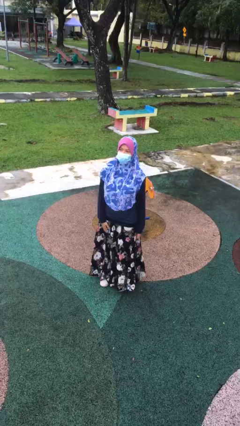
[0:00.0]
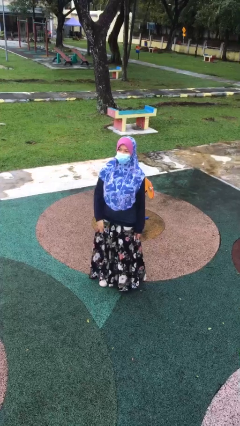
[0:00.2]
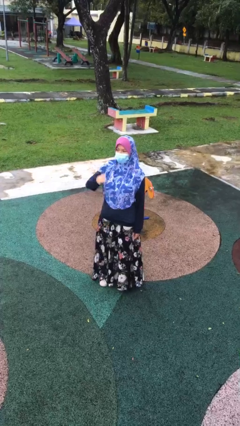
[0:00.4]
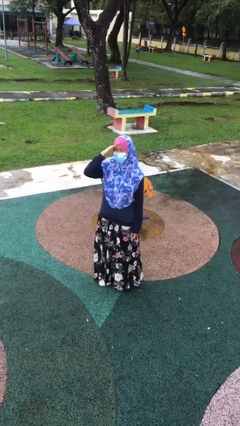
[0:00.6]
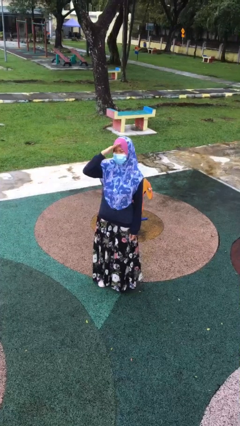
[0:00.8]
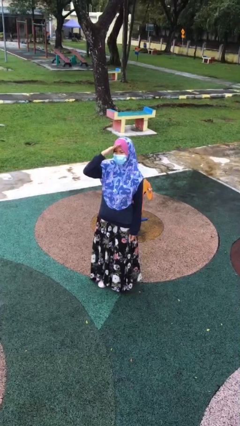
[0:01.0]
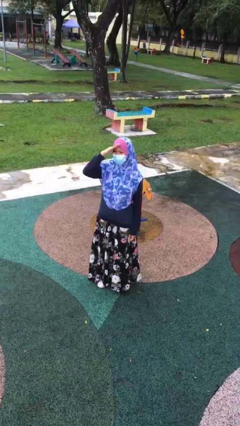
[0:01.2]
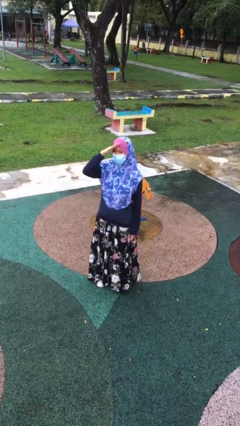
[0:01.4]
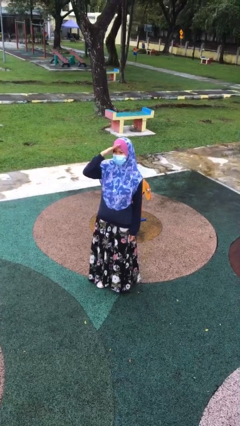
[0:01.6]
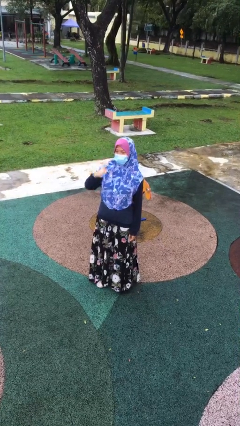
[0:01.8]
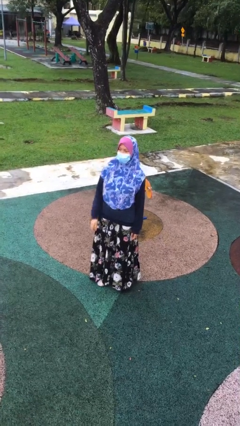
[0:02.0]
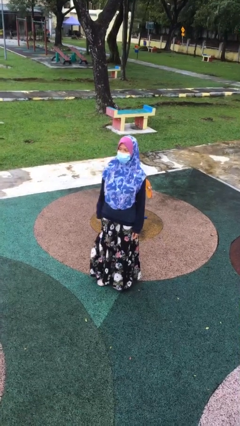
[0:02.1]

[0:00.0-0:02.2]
person salutes

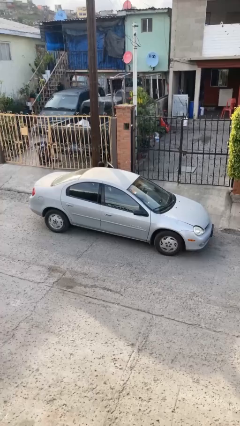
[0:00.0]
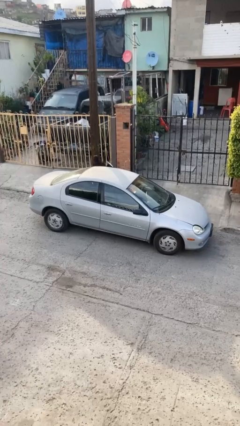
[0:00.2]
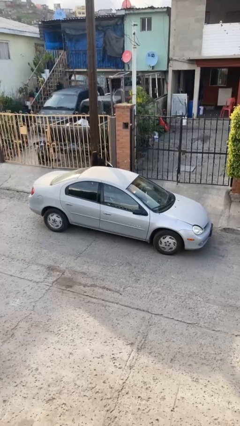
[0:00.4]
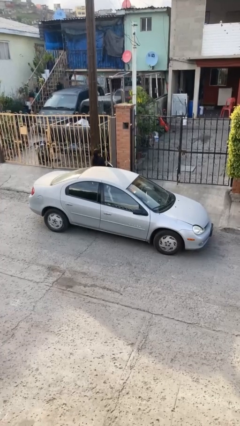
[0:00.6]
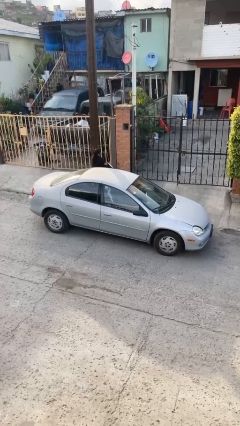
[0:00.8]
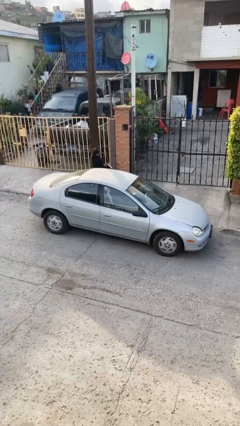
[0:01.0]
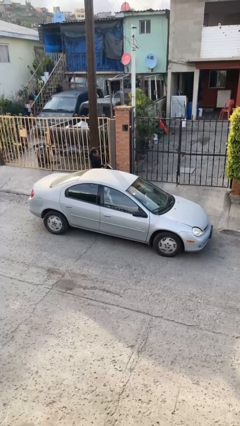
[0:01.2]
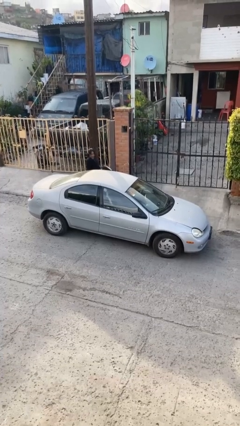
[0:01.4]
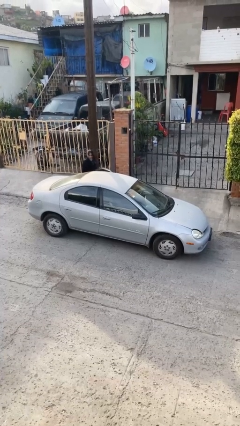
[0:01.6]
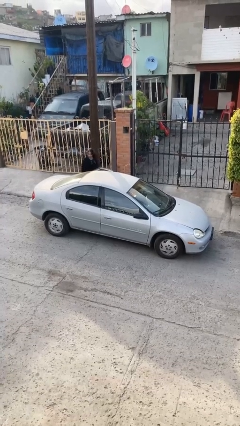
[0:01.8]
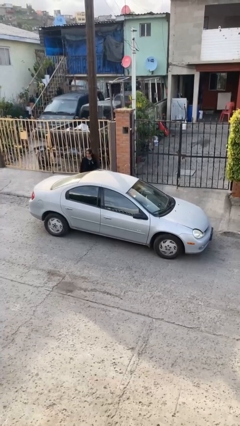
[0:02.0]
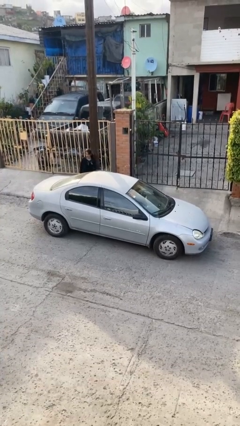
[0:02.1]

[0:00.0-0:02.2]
car drops off person

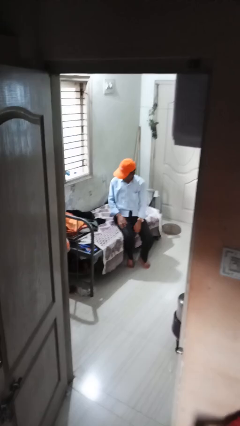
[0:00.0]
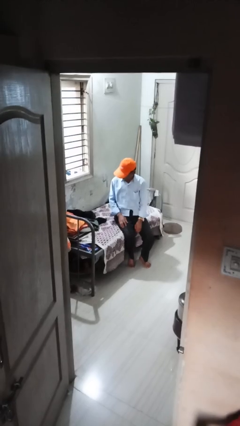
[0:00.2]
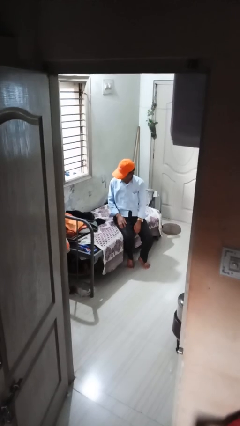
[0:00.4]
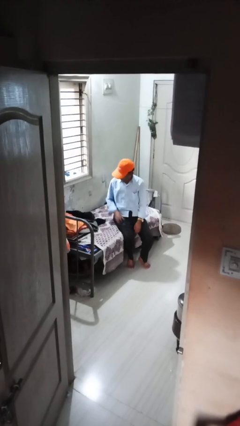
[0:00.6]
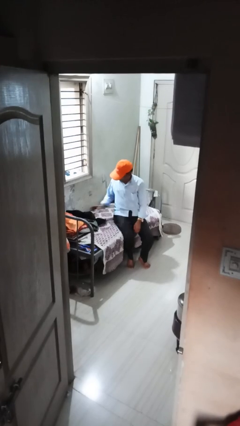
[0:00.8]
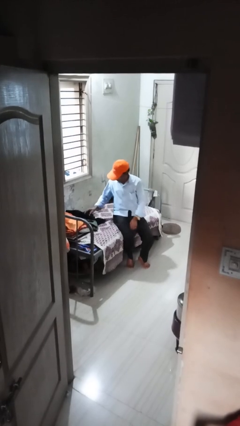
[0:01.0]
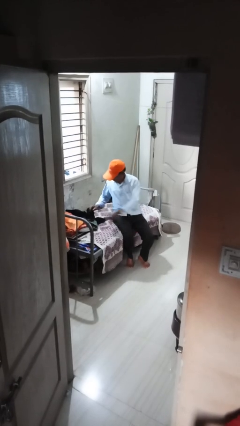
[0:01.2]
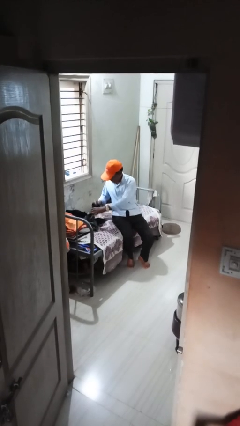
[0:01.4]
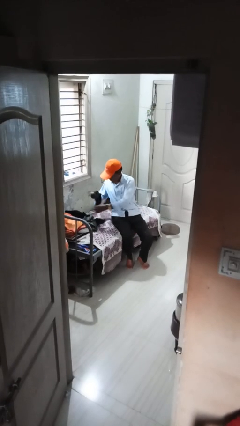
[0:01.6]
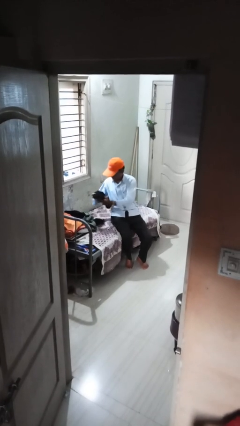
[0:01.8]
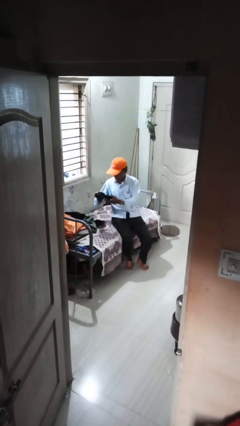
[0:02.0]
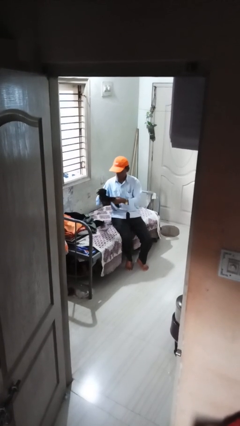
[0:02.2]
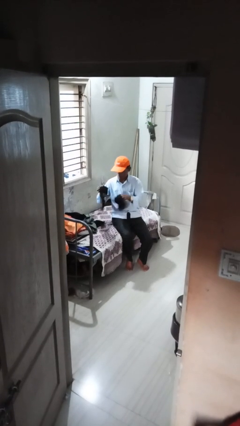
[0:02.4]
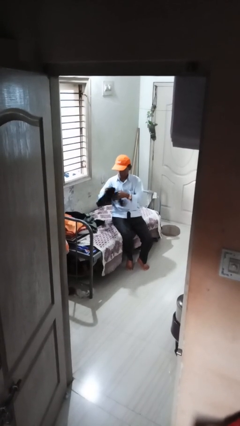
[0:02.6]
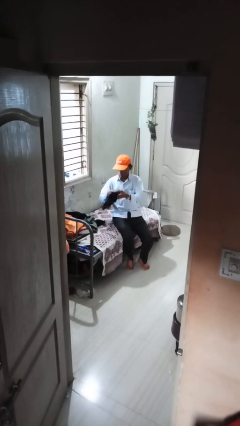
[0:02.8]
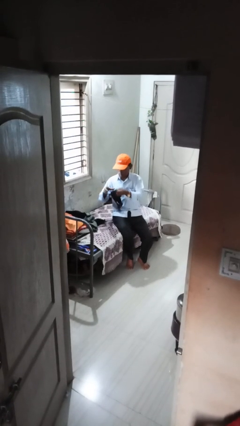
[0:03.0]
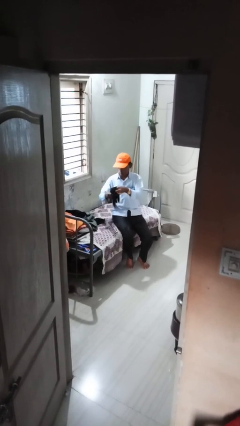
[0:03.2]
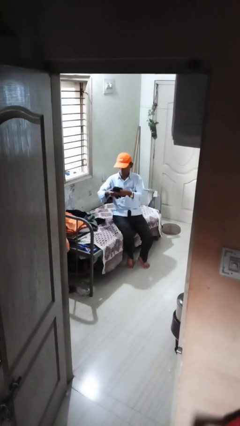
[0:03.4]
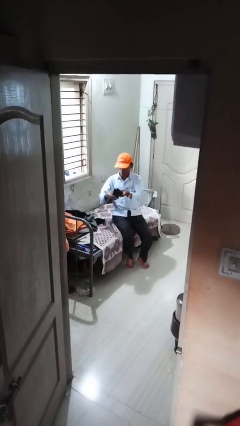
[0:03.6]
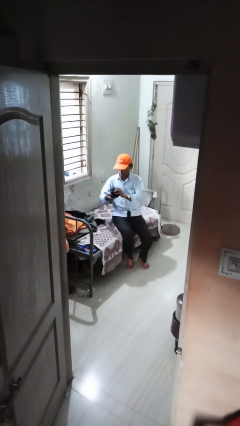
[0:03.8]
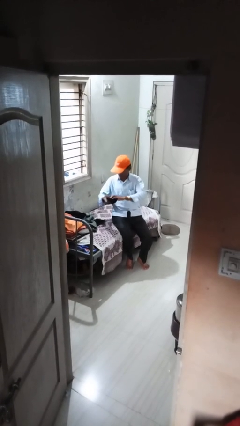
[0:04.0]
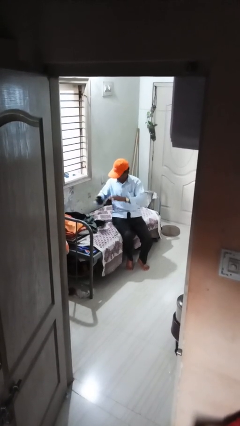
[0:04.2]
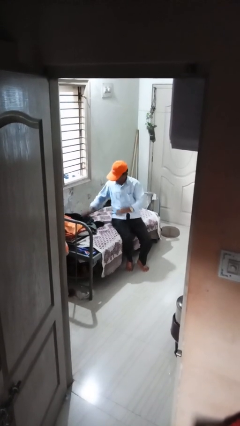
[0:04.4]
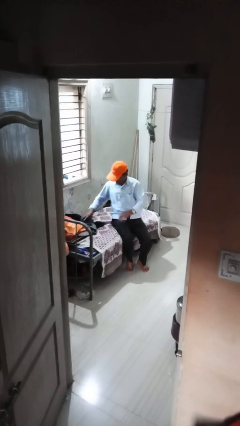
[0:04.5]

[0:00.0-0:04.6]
person folds socks

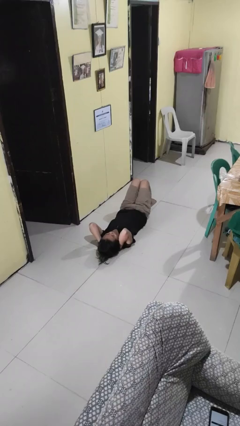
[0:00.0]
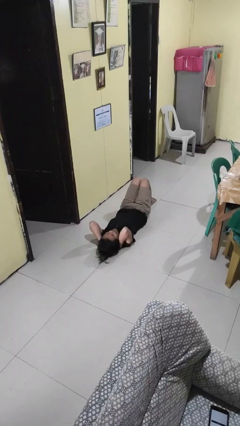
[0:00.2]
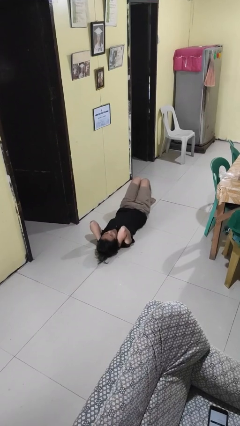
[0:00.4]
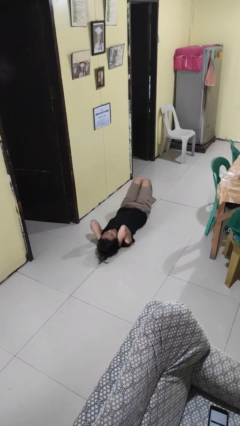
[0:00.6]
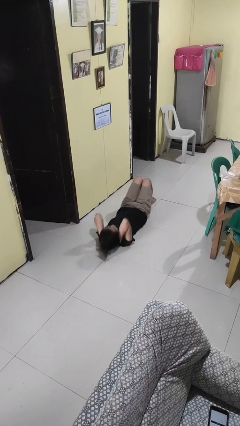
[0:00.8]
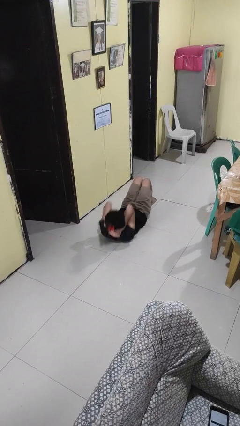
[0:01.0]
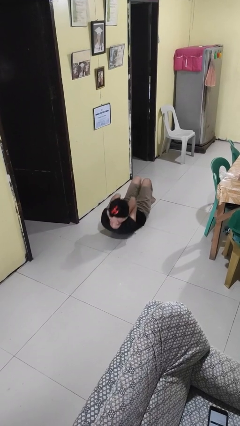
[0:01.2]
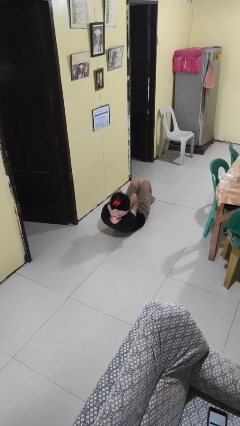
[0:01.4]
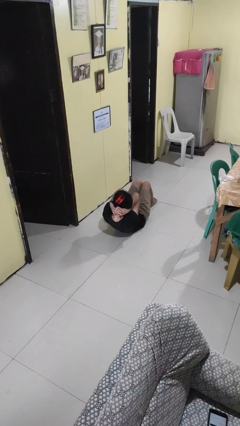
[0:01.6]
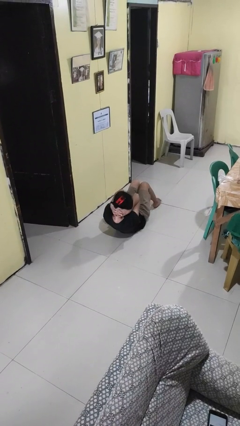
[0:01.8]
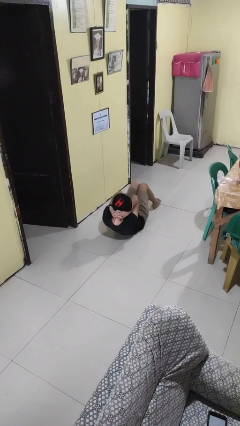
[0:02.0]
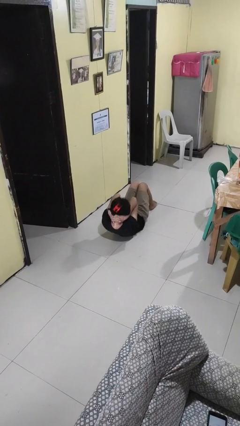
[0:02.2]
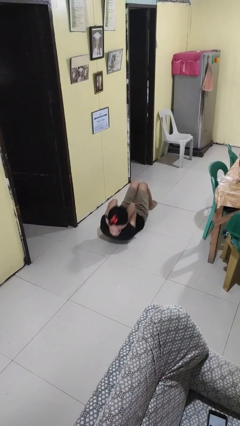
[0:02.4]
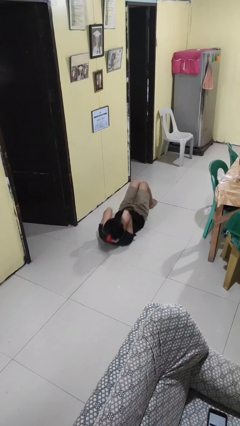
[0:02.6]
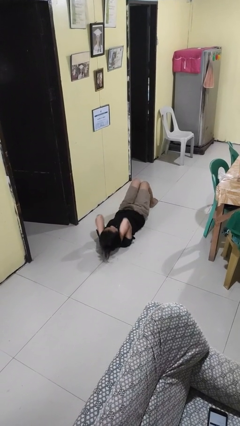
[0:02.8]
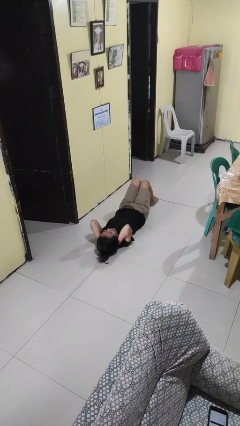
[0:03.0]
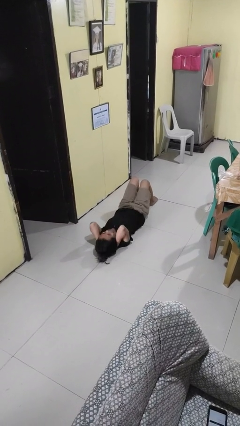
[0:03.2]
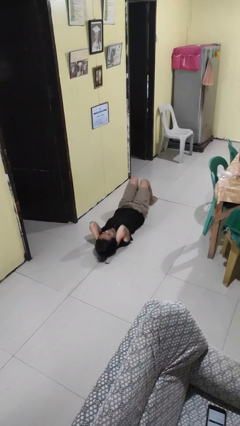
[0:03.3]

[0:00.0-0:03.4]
person exercises with situp

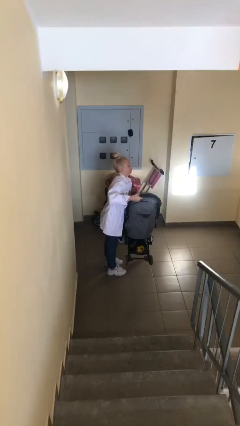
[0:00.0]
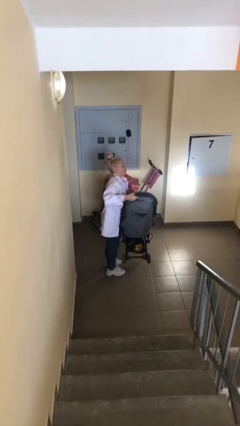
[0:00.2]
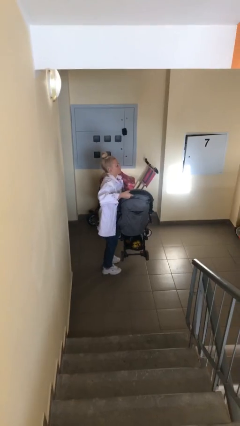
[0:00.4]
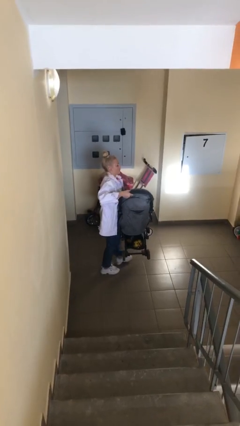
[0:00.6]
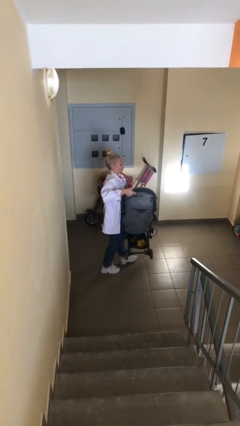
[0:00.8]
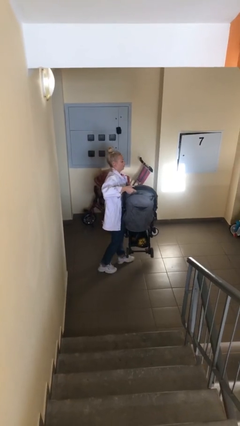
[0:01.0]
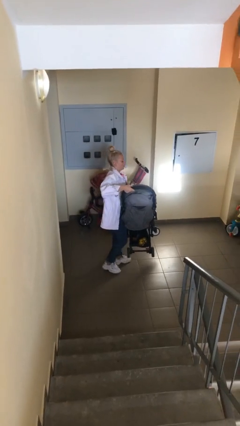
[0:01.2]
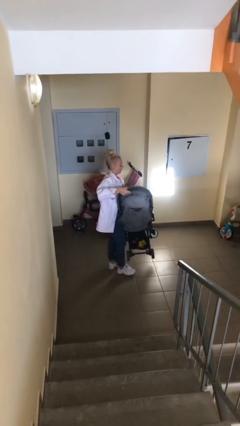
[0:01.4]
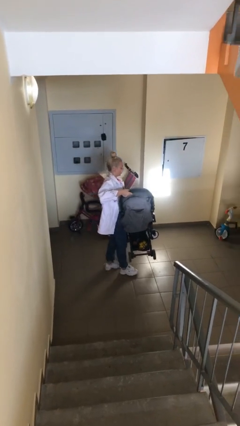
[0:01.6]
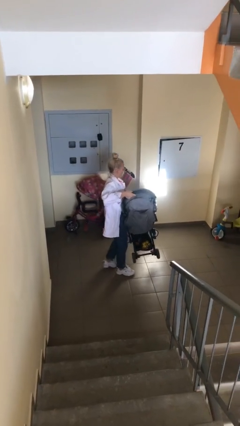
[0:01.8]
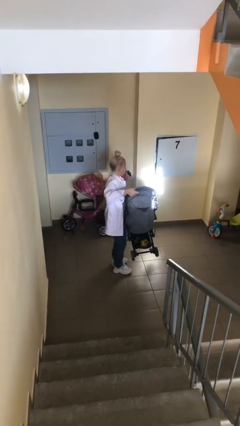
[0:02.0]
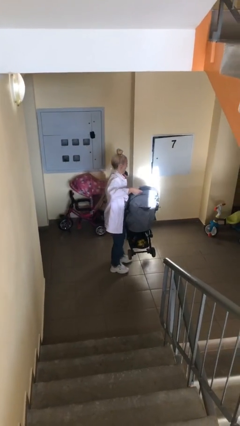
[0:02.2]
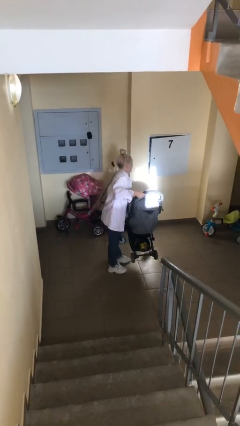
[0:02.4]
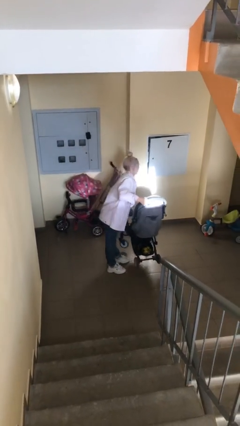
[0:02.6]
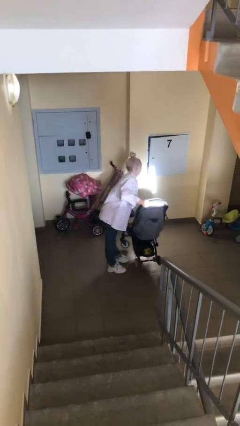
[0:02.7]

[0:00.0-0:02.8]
person carries heavy object

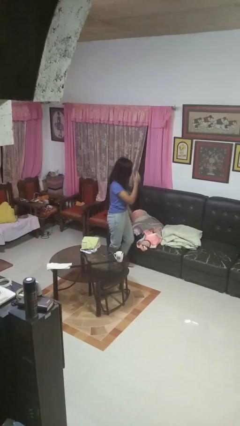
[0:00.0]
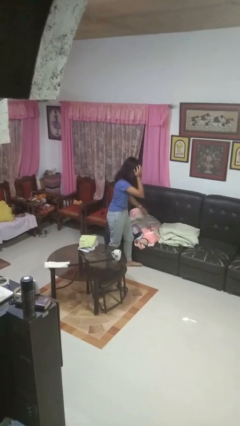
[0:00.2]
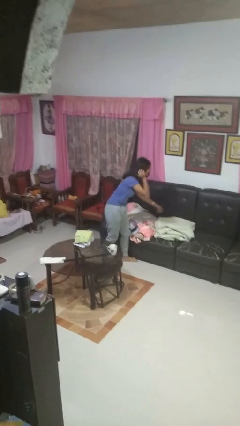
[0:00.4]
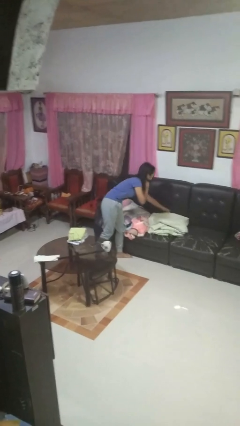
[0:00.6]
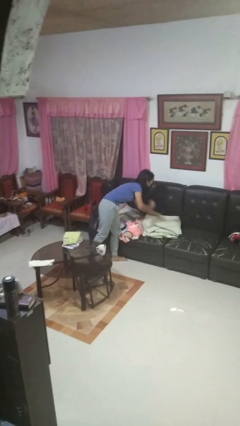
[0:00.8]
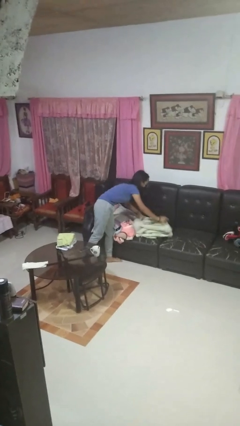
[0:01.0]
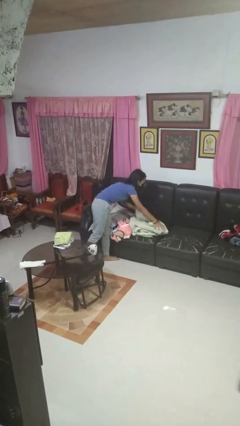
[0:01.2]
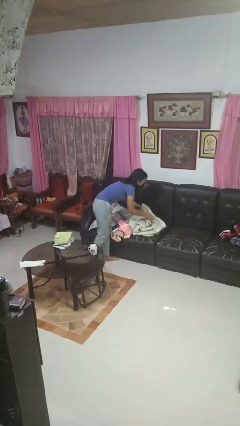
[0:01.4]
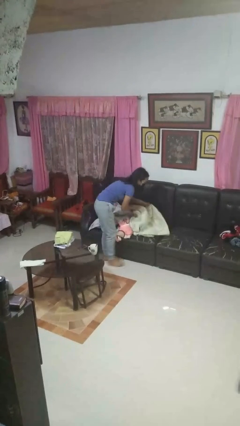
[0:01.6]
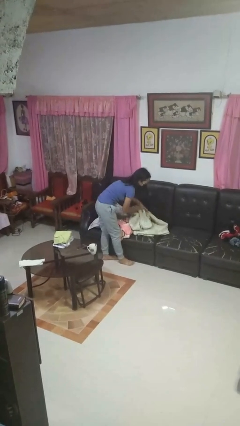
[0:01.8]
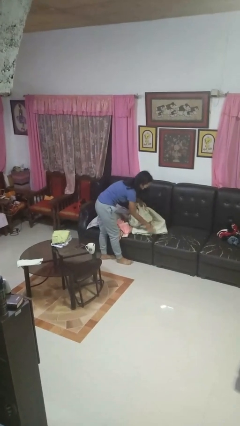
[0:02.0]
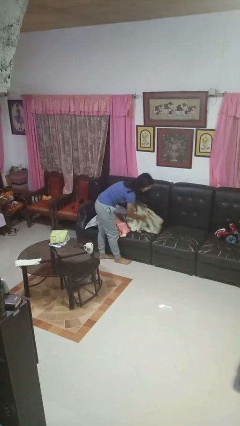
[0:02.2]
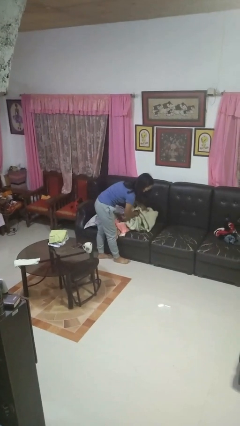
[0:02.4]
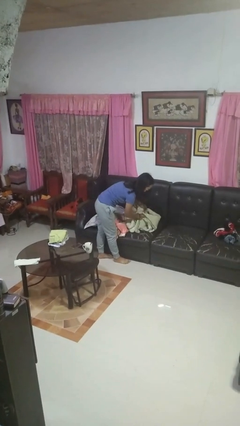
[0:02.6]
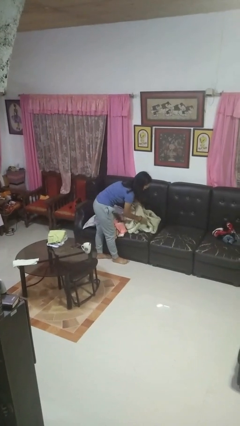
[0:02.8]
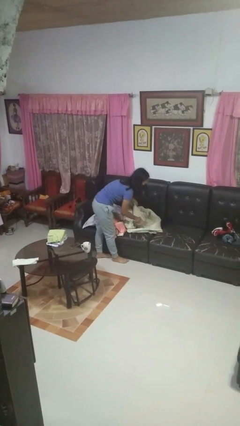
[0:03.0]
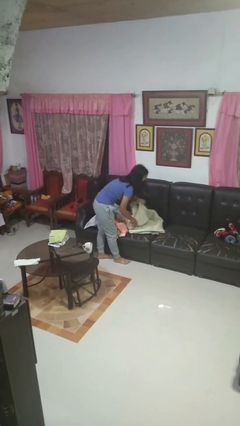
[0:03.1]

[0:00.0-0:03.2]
person searches in couch
